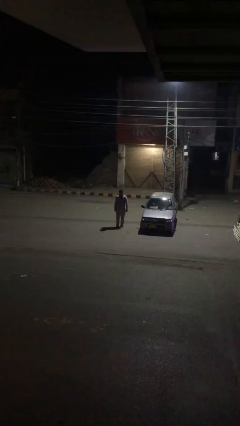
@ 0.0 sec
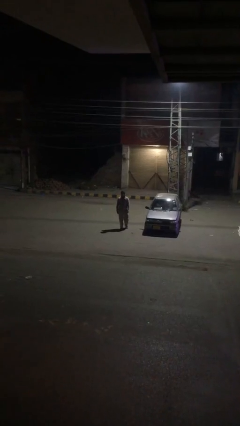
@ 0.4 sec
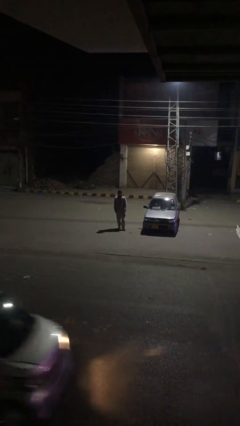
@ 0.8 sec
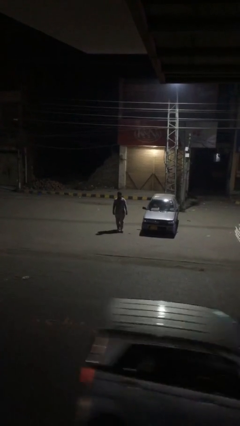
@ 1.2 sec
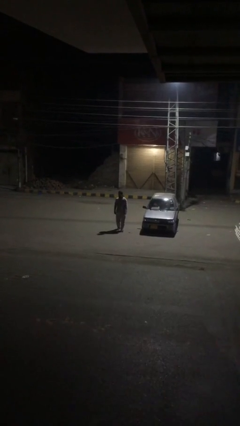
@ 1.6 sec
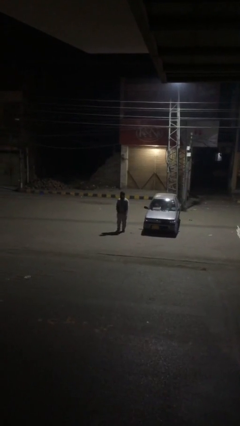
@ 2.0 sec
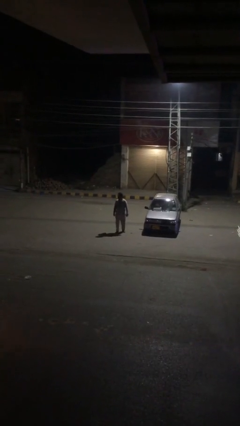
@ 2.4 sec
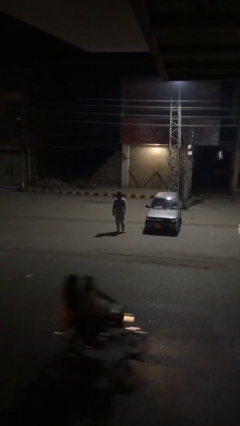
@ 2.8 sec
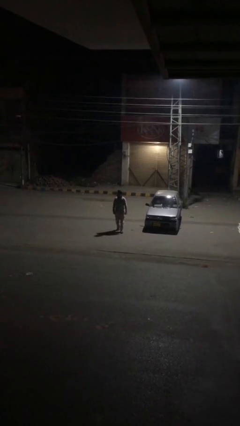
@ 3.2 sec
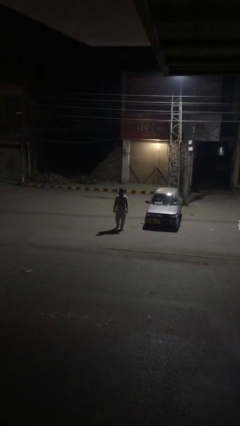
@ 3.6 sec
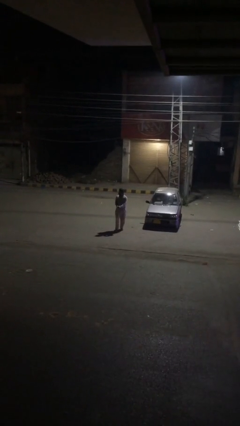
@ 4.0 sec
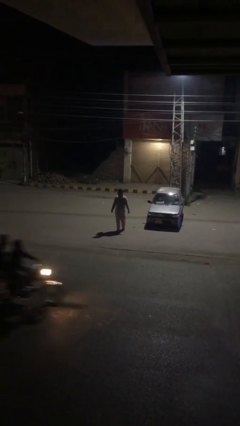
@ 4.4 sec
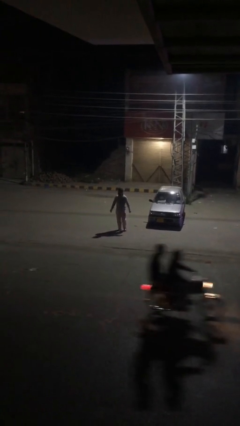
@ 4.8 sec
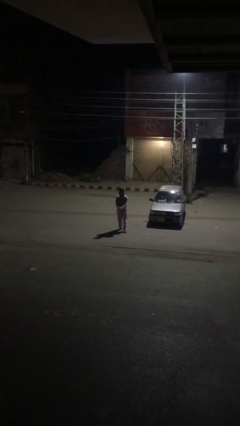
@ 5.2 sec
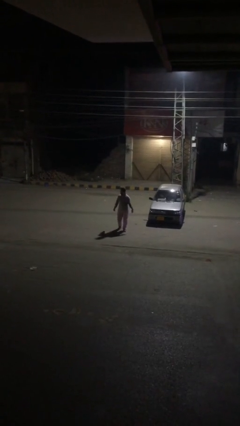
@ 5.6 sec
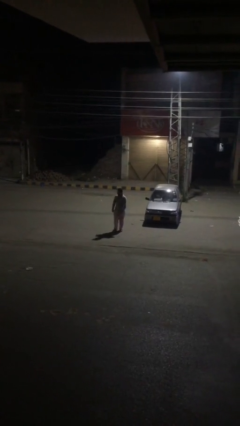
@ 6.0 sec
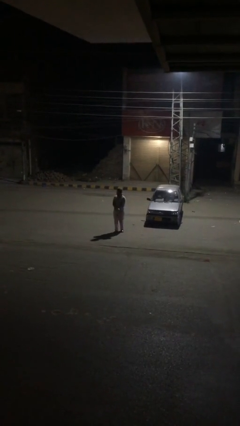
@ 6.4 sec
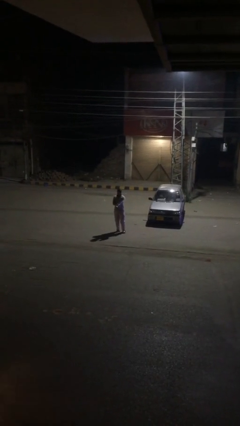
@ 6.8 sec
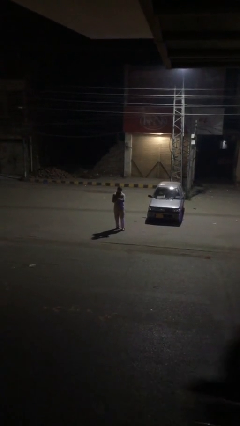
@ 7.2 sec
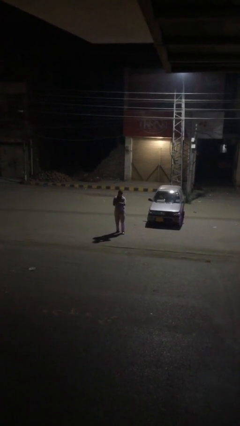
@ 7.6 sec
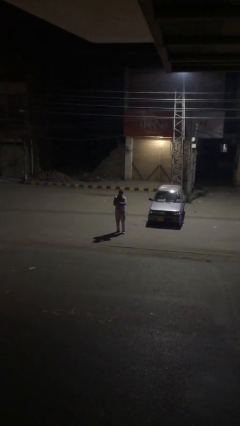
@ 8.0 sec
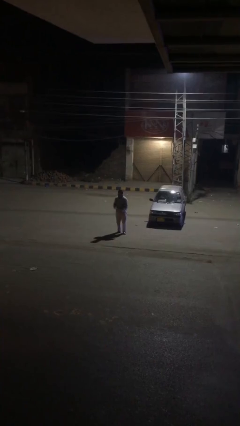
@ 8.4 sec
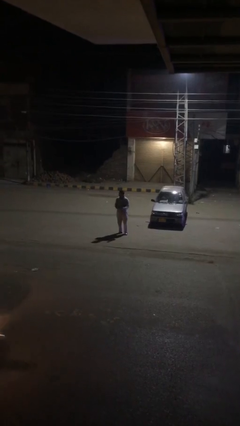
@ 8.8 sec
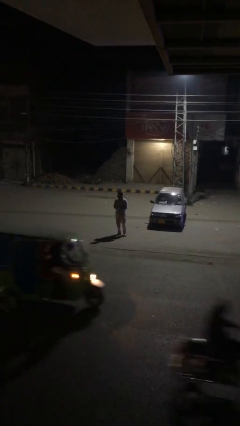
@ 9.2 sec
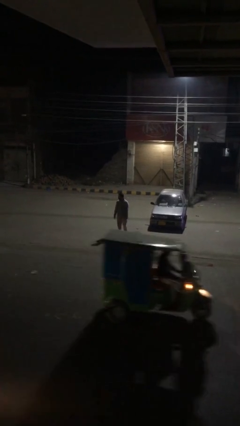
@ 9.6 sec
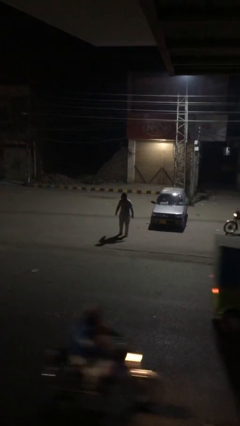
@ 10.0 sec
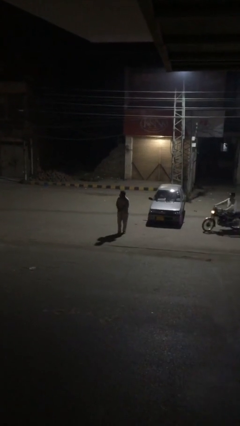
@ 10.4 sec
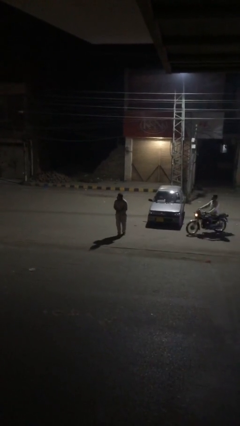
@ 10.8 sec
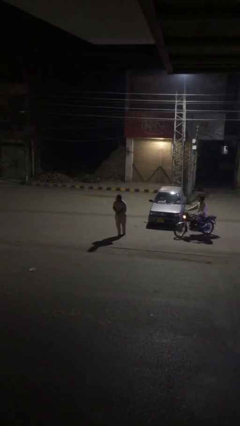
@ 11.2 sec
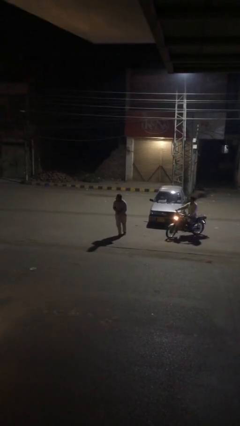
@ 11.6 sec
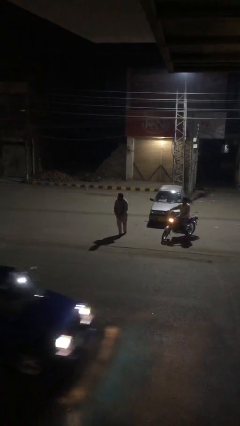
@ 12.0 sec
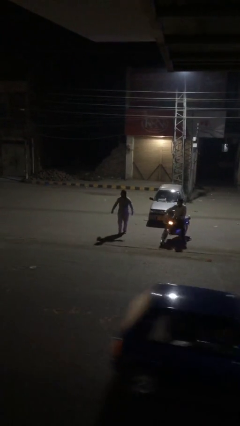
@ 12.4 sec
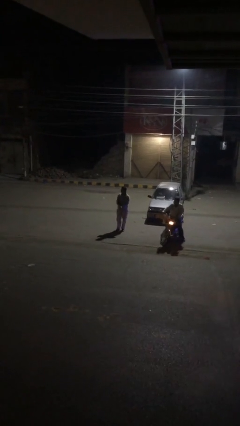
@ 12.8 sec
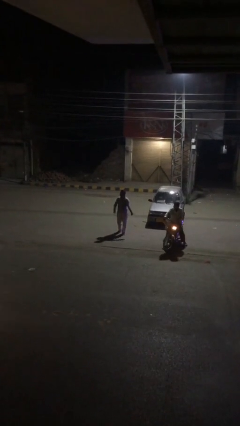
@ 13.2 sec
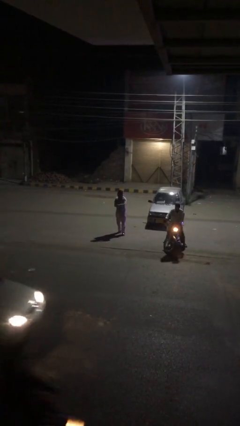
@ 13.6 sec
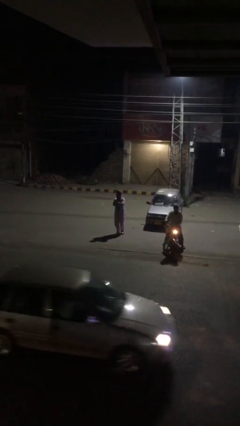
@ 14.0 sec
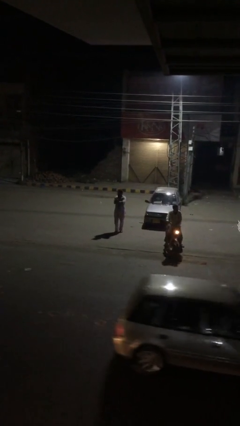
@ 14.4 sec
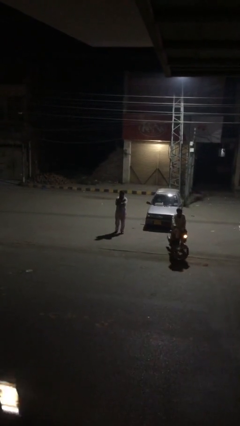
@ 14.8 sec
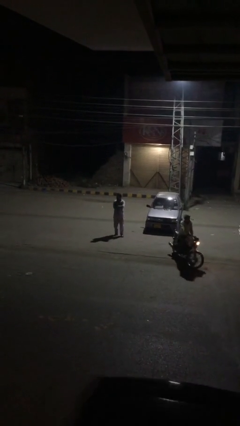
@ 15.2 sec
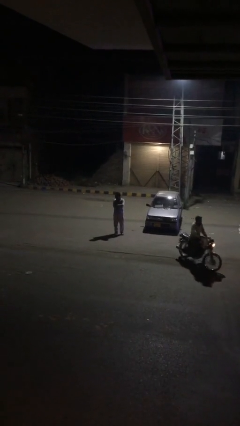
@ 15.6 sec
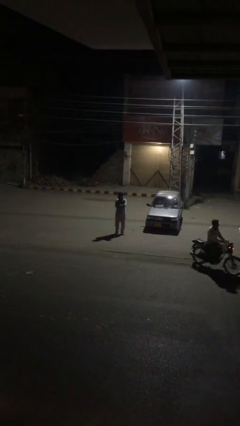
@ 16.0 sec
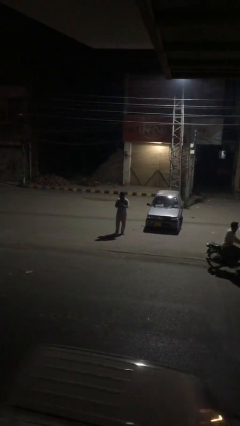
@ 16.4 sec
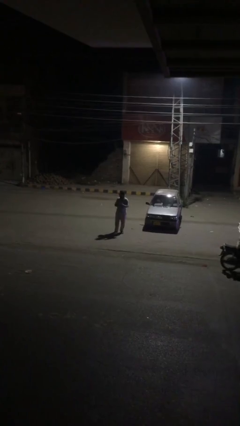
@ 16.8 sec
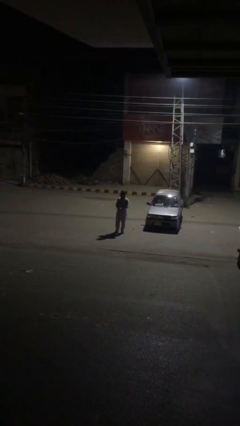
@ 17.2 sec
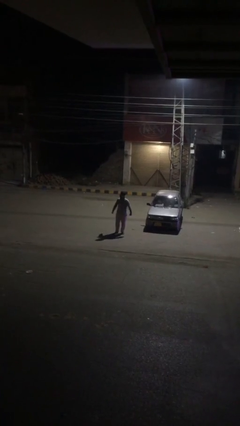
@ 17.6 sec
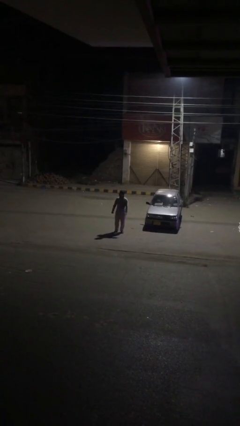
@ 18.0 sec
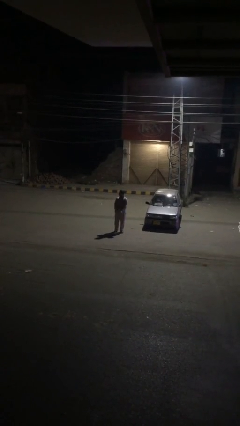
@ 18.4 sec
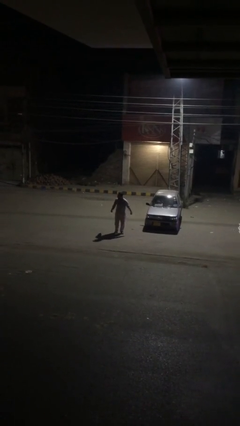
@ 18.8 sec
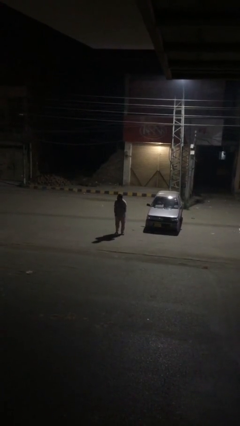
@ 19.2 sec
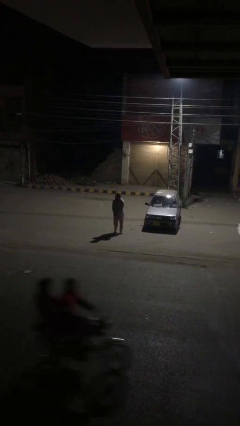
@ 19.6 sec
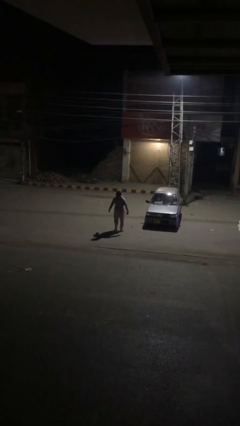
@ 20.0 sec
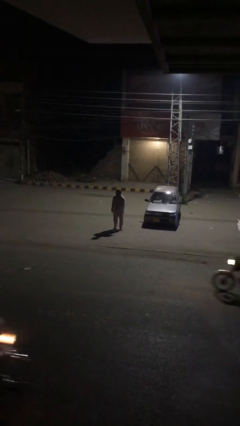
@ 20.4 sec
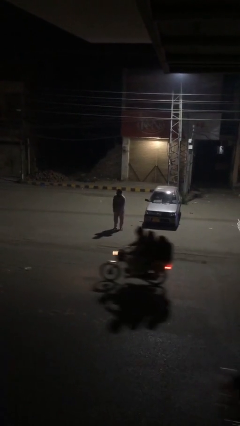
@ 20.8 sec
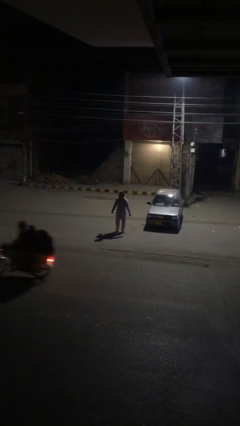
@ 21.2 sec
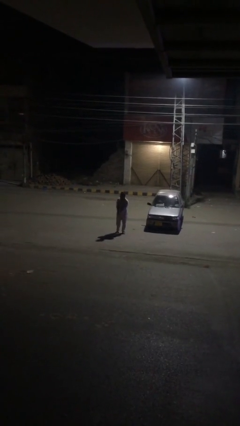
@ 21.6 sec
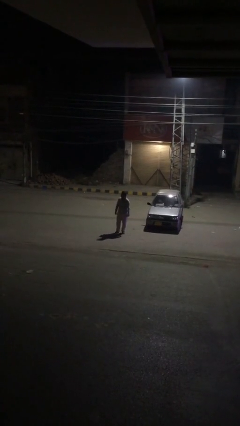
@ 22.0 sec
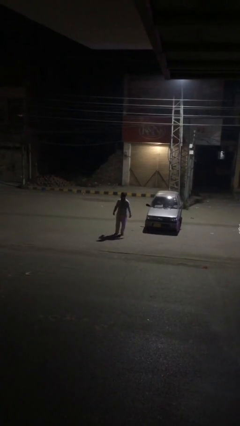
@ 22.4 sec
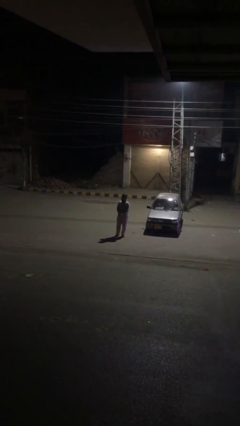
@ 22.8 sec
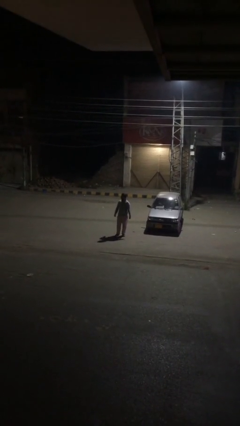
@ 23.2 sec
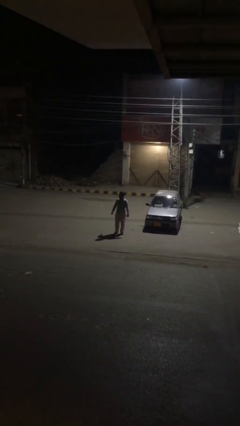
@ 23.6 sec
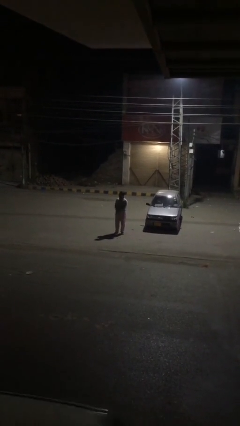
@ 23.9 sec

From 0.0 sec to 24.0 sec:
person walks

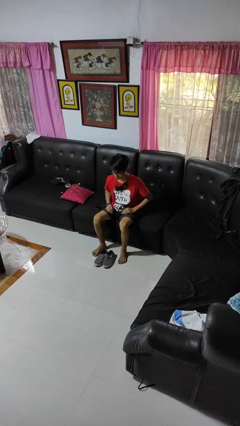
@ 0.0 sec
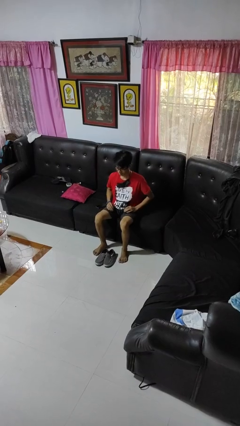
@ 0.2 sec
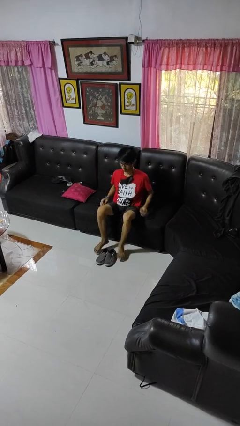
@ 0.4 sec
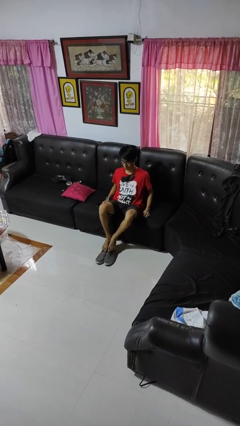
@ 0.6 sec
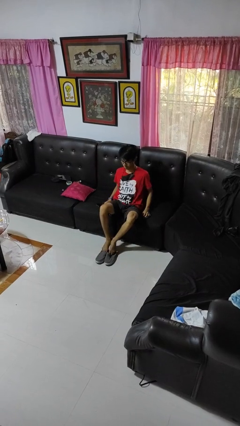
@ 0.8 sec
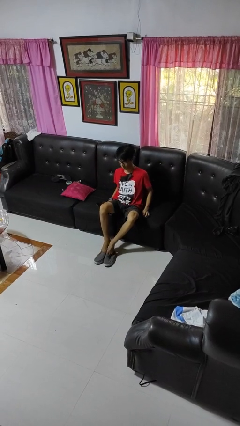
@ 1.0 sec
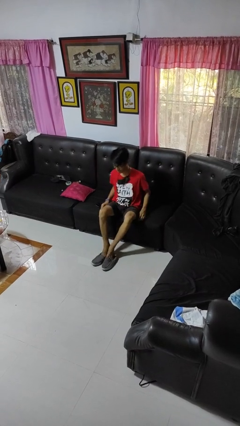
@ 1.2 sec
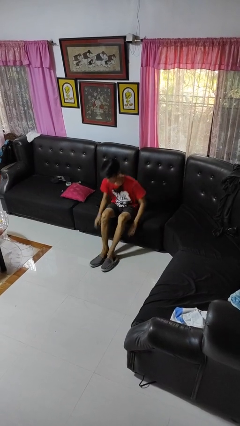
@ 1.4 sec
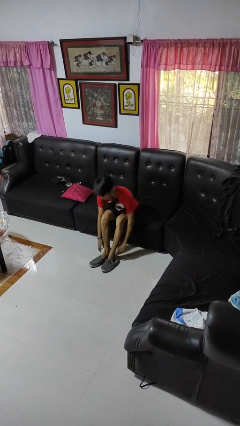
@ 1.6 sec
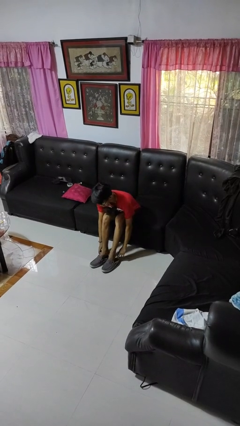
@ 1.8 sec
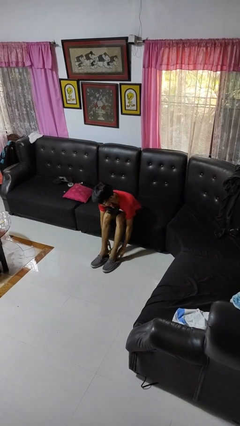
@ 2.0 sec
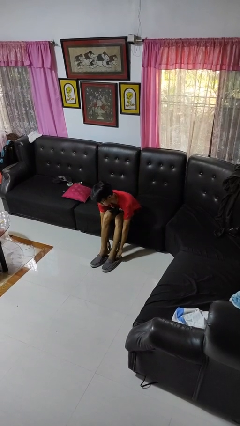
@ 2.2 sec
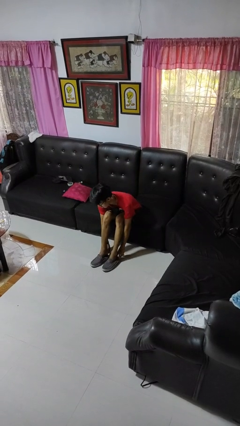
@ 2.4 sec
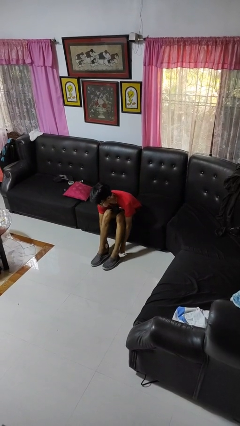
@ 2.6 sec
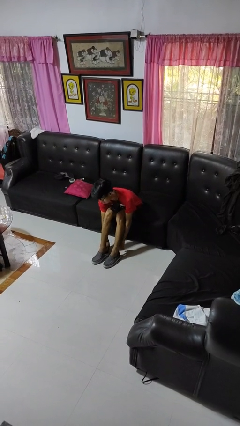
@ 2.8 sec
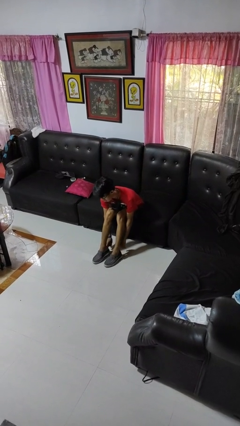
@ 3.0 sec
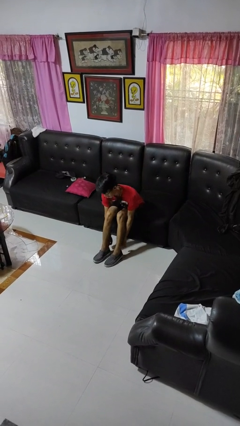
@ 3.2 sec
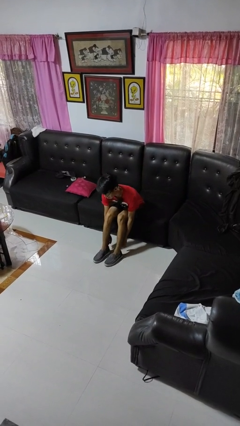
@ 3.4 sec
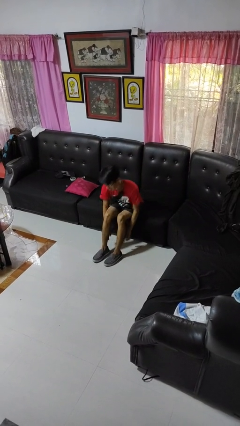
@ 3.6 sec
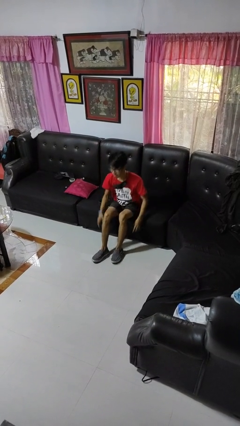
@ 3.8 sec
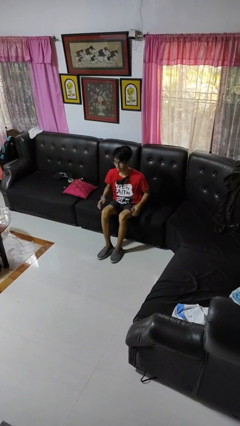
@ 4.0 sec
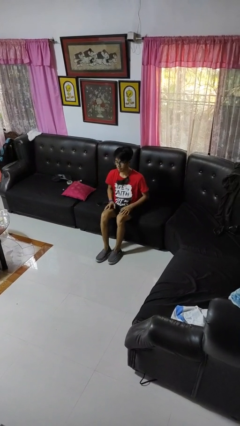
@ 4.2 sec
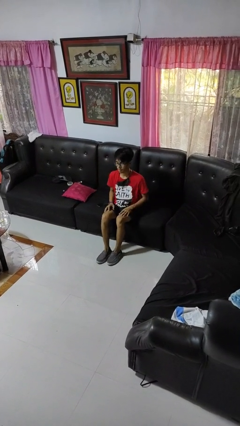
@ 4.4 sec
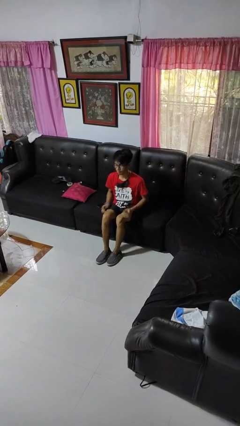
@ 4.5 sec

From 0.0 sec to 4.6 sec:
person puts on shoes

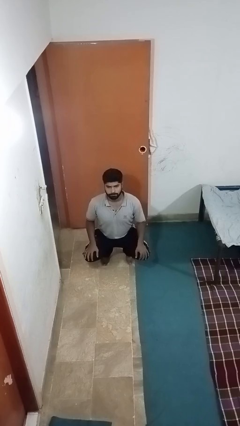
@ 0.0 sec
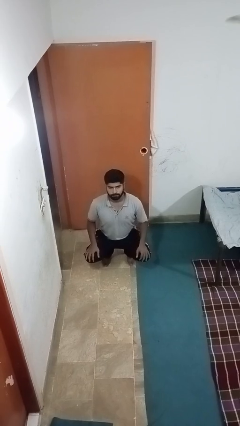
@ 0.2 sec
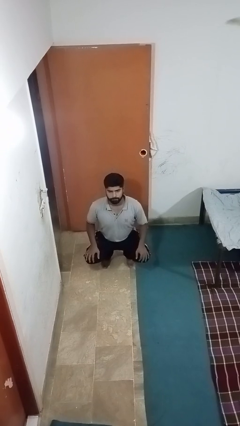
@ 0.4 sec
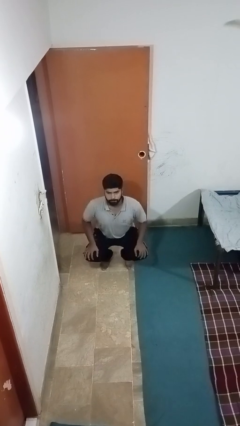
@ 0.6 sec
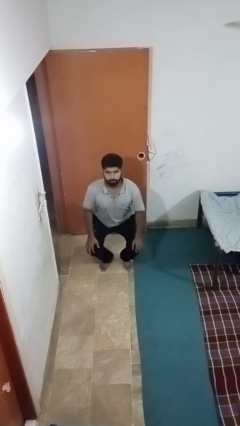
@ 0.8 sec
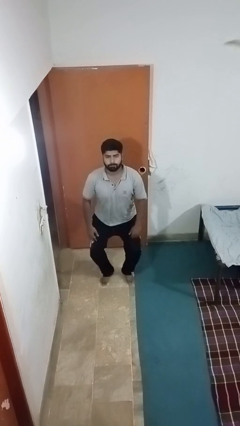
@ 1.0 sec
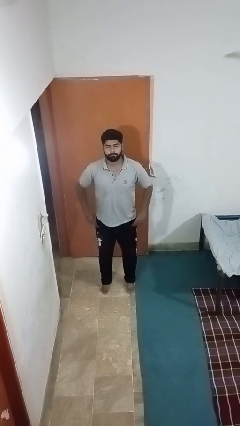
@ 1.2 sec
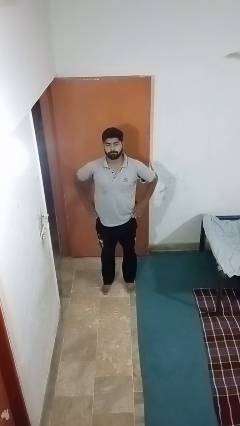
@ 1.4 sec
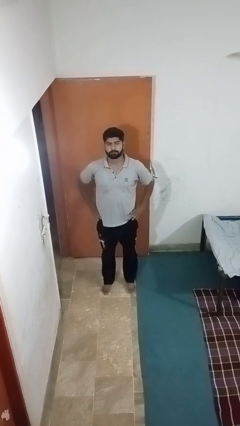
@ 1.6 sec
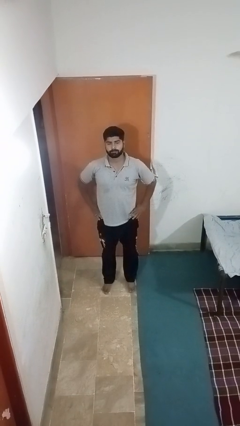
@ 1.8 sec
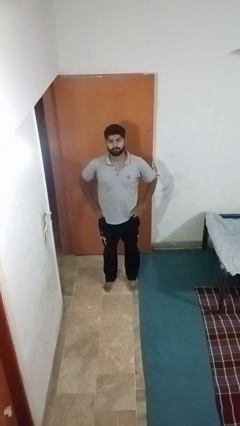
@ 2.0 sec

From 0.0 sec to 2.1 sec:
person stands up
